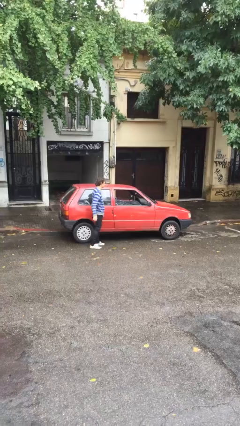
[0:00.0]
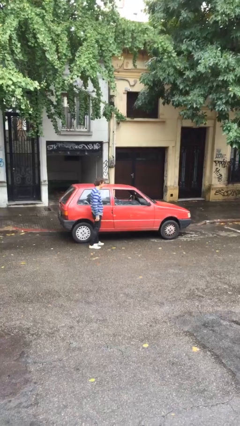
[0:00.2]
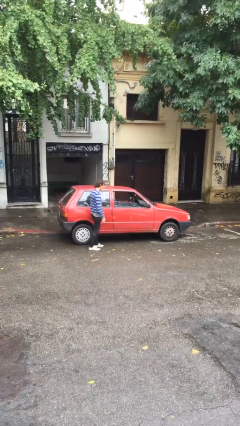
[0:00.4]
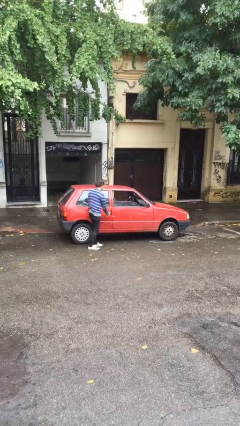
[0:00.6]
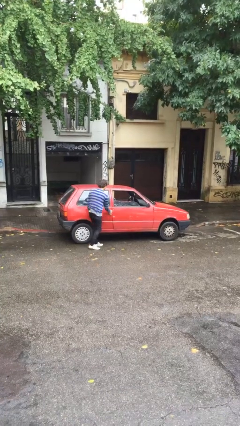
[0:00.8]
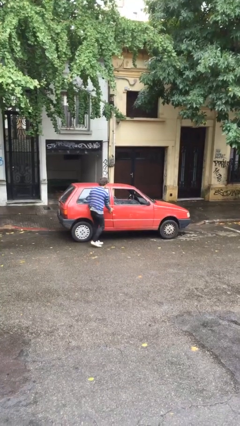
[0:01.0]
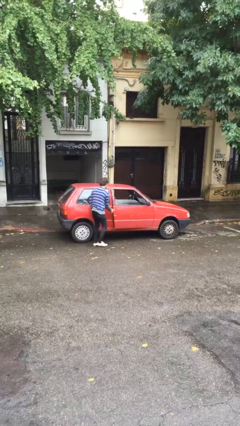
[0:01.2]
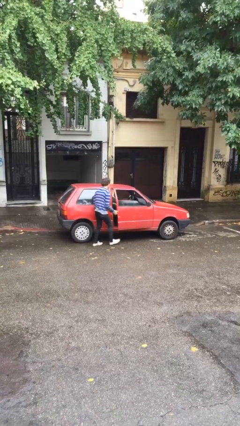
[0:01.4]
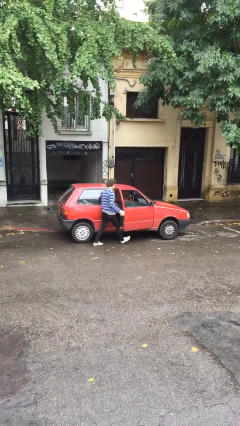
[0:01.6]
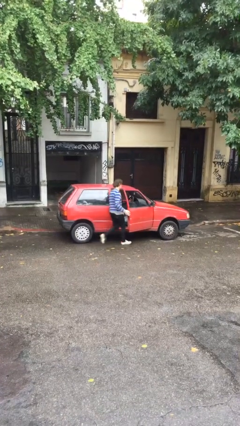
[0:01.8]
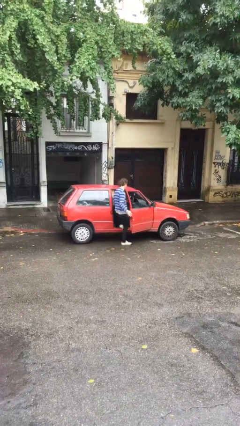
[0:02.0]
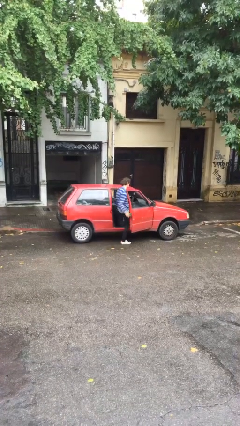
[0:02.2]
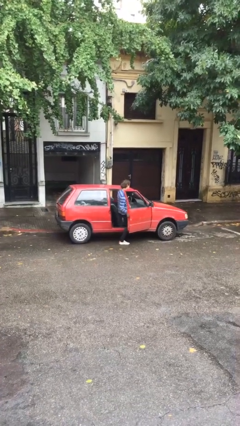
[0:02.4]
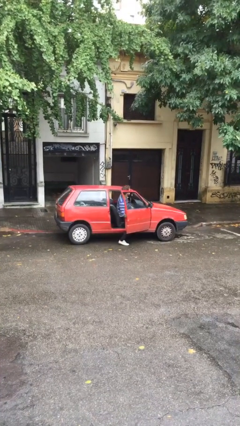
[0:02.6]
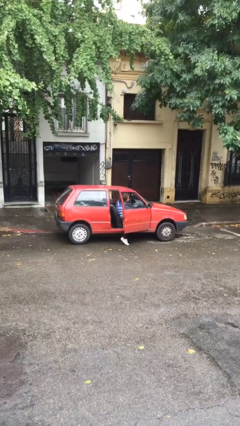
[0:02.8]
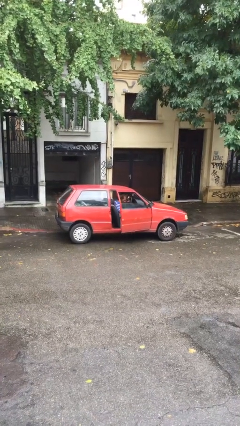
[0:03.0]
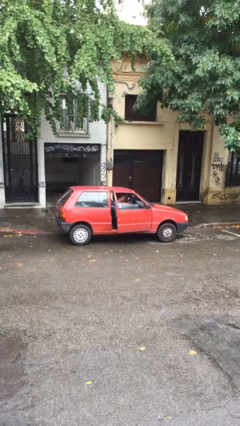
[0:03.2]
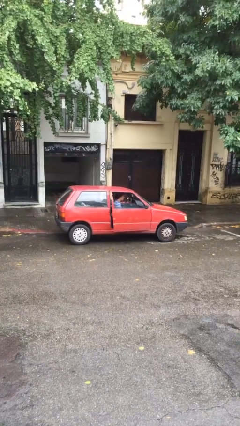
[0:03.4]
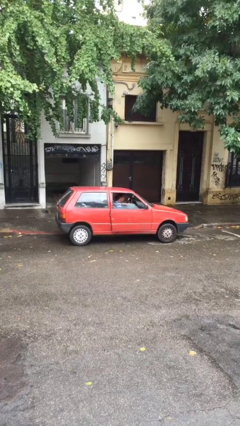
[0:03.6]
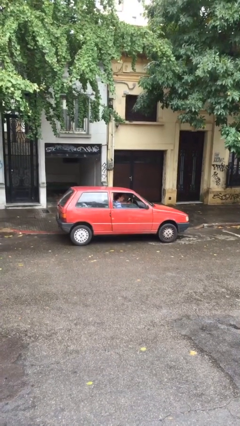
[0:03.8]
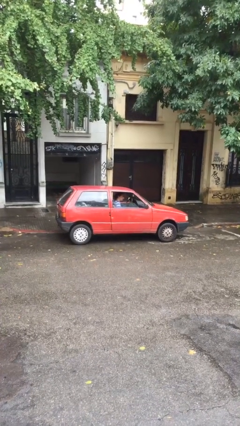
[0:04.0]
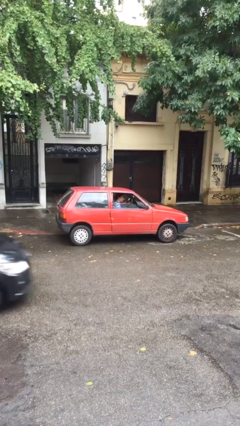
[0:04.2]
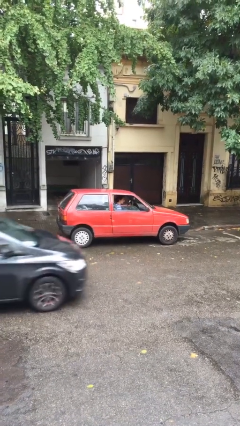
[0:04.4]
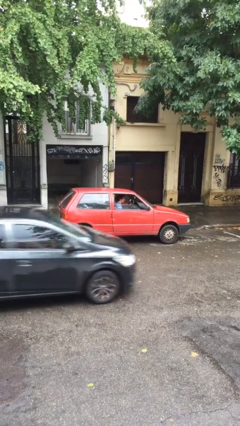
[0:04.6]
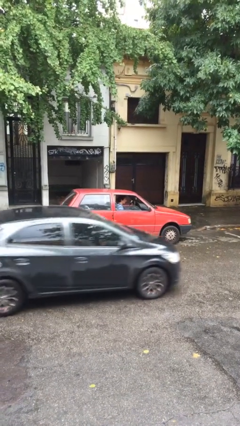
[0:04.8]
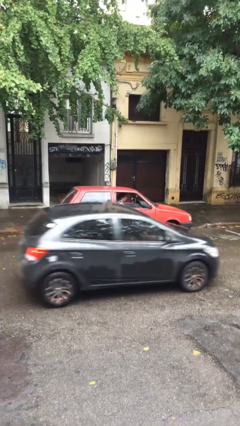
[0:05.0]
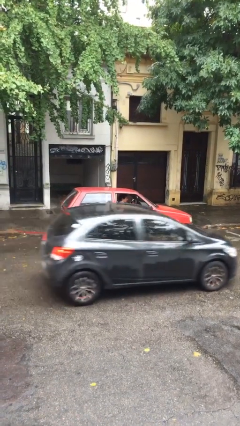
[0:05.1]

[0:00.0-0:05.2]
car picks up person

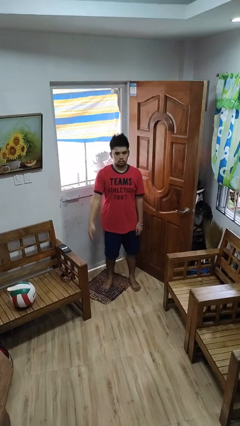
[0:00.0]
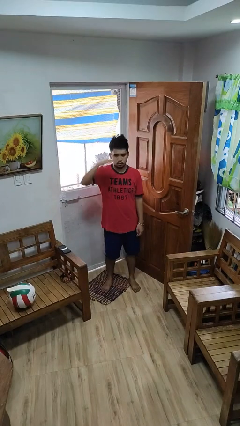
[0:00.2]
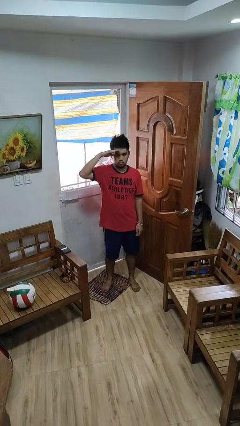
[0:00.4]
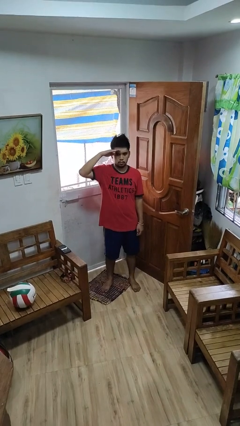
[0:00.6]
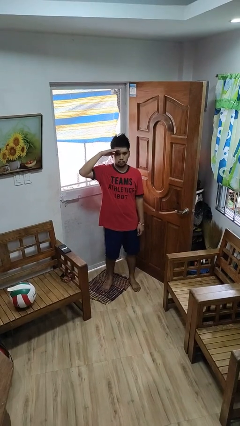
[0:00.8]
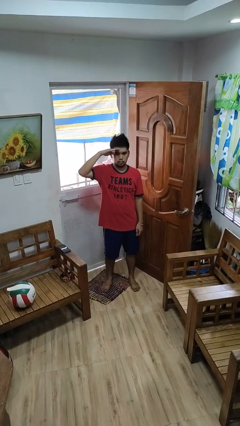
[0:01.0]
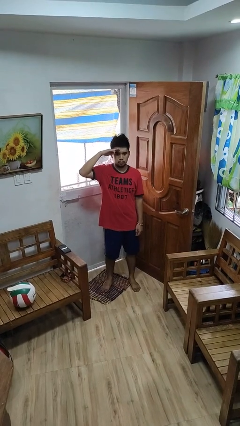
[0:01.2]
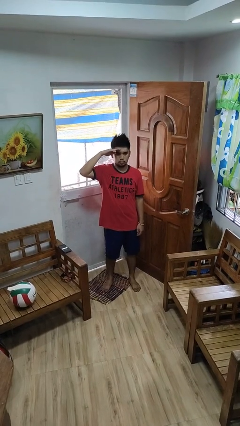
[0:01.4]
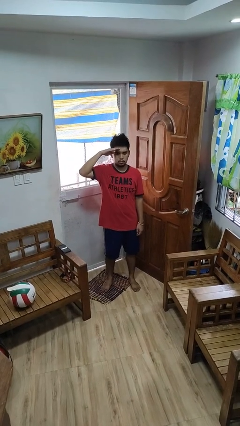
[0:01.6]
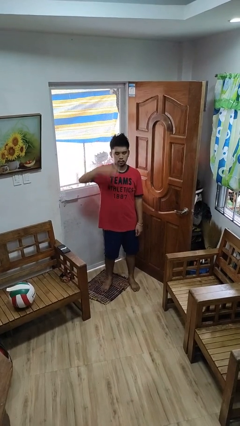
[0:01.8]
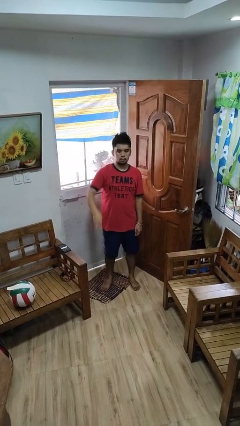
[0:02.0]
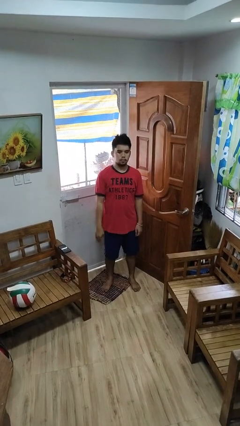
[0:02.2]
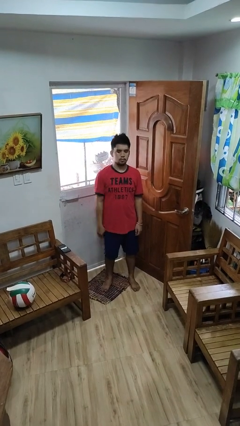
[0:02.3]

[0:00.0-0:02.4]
person salutes

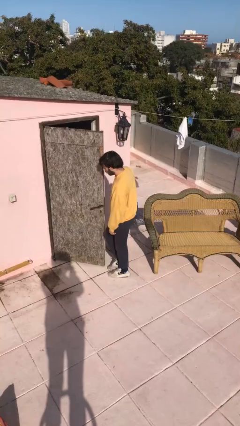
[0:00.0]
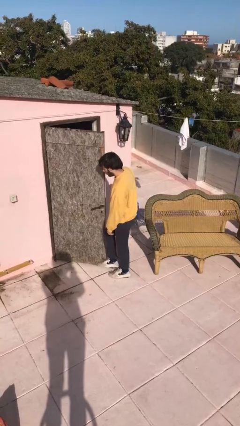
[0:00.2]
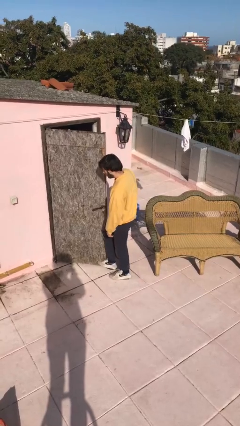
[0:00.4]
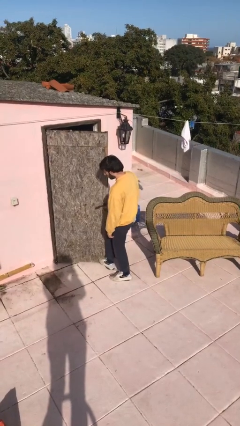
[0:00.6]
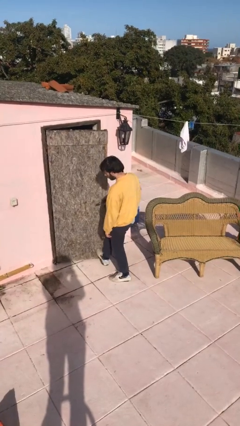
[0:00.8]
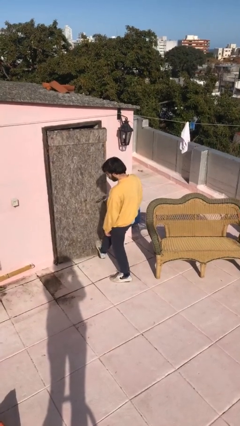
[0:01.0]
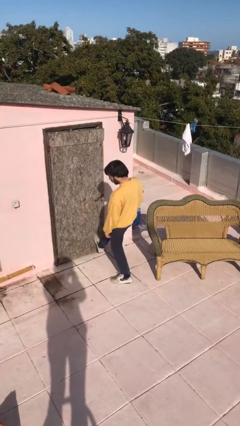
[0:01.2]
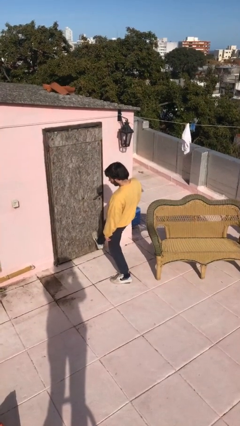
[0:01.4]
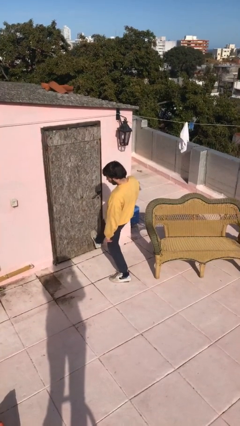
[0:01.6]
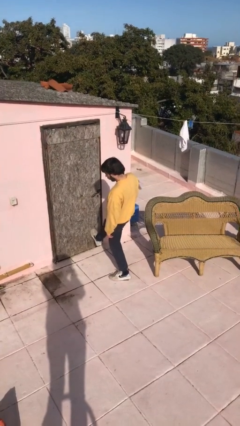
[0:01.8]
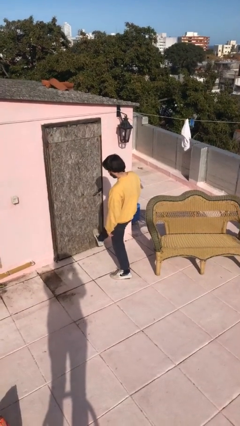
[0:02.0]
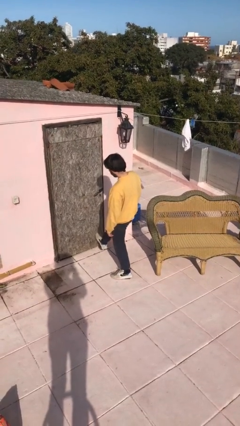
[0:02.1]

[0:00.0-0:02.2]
person closes door with foot

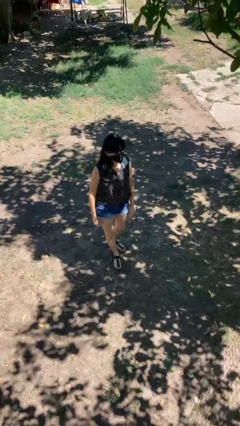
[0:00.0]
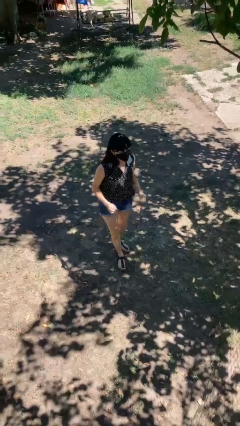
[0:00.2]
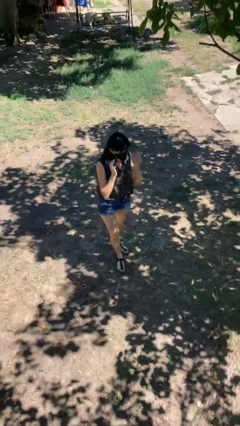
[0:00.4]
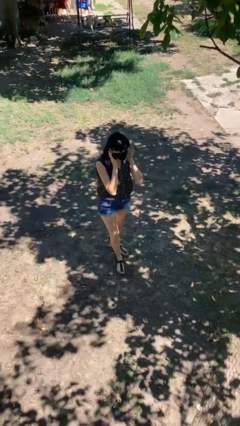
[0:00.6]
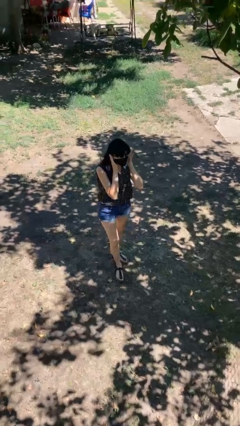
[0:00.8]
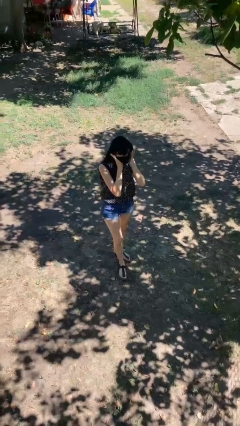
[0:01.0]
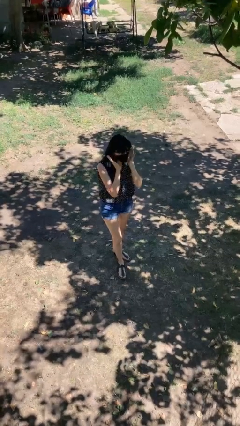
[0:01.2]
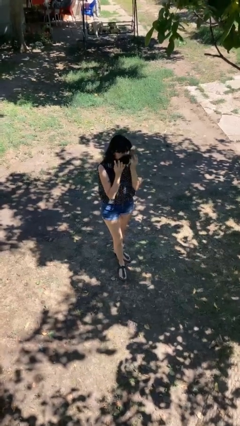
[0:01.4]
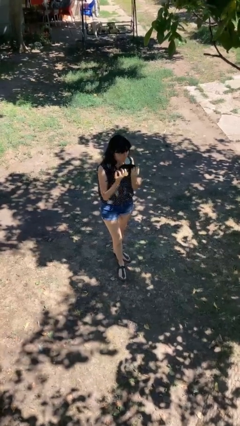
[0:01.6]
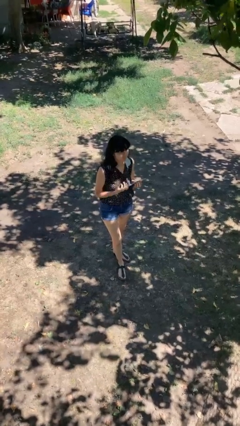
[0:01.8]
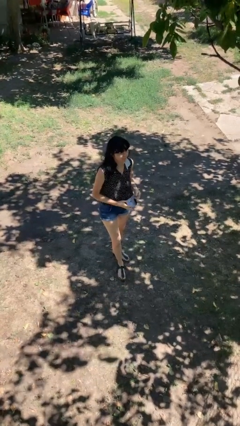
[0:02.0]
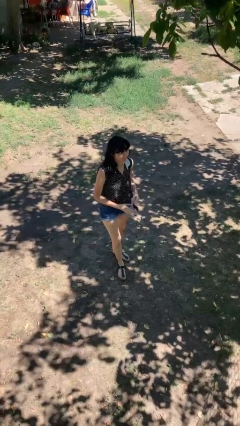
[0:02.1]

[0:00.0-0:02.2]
person takes off facemask

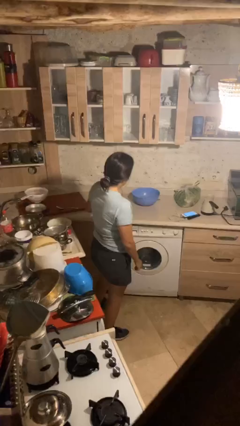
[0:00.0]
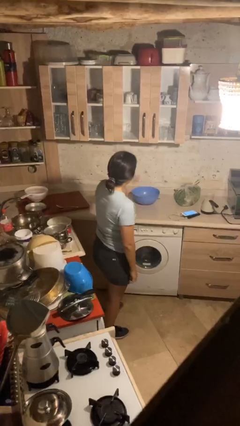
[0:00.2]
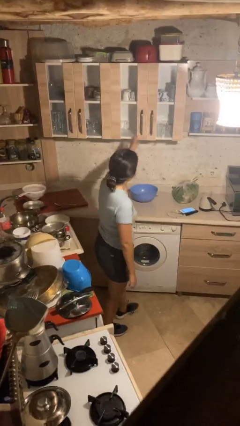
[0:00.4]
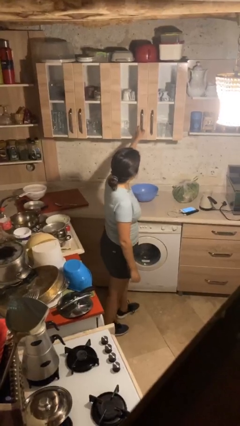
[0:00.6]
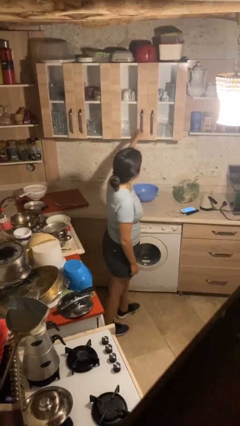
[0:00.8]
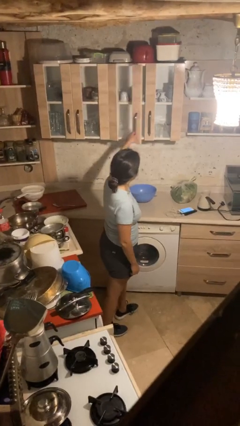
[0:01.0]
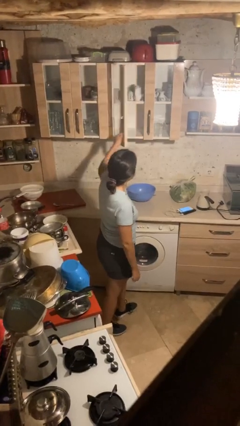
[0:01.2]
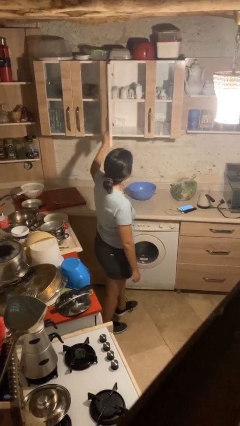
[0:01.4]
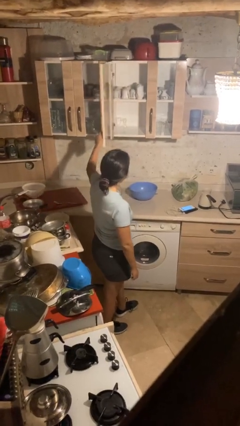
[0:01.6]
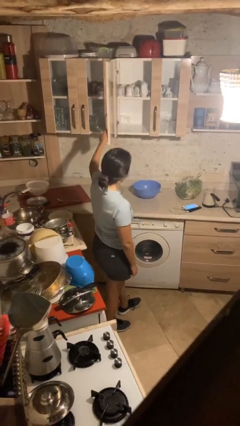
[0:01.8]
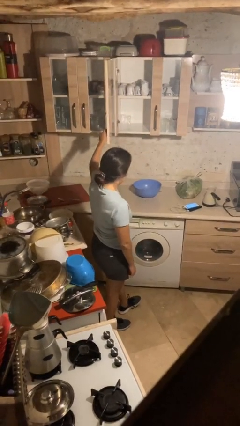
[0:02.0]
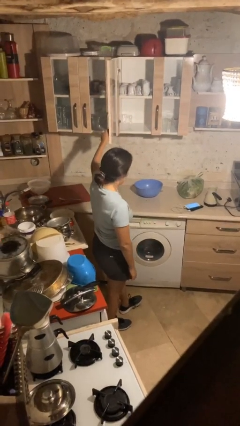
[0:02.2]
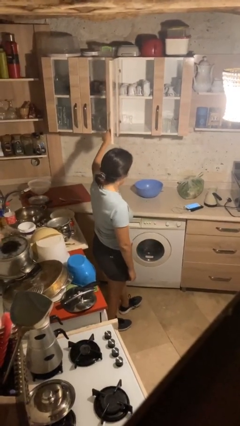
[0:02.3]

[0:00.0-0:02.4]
person closes cabinet

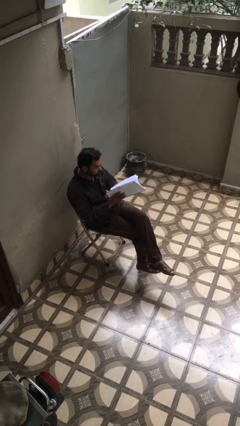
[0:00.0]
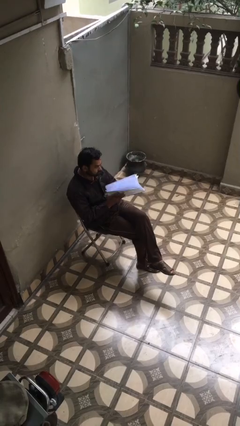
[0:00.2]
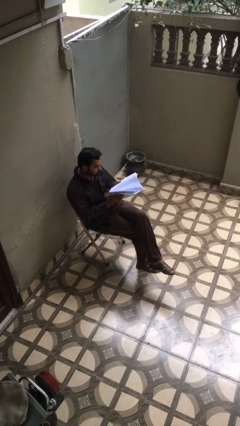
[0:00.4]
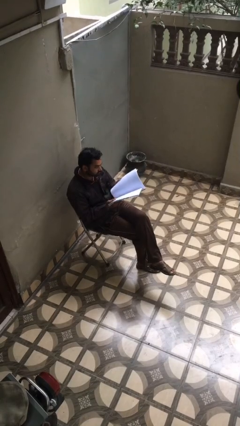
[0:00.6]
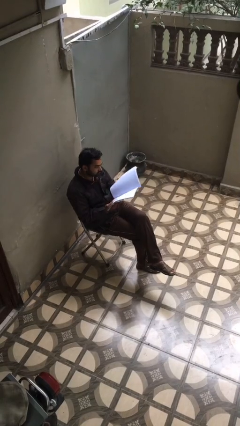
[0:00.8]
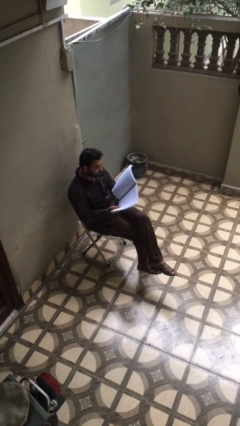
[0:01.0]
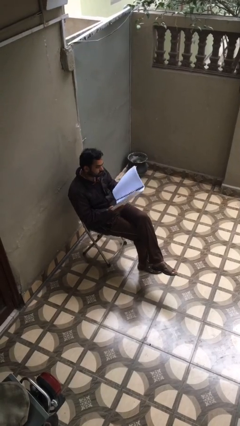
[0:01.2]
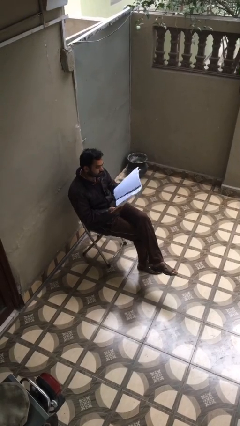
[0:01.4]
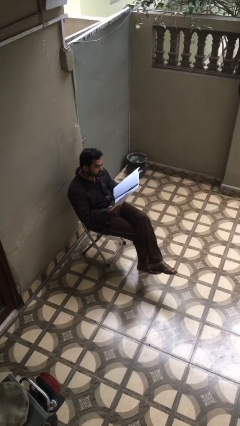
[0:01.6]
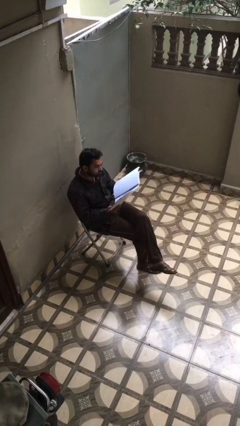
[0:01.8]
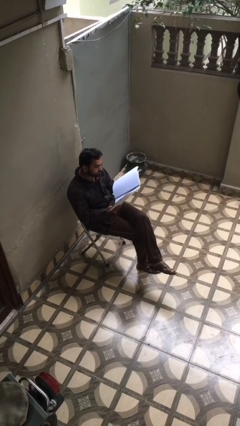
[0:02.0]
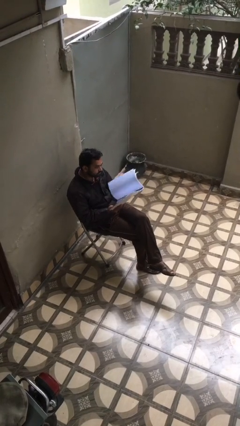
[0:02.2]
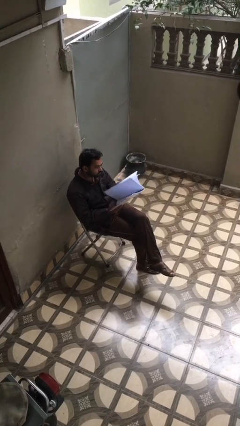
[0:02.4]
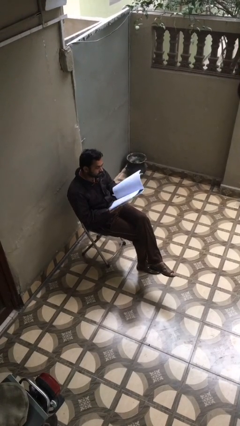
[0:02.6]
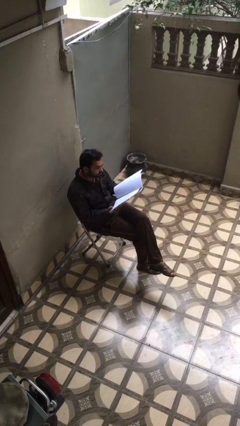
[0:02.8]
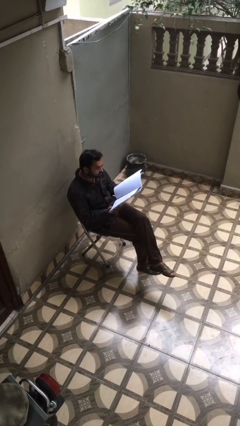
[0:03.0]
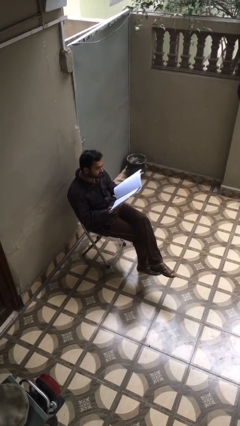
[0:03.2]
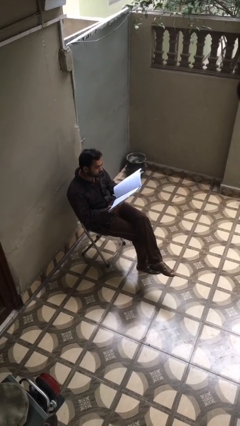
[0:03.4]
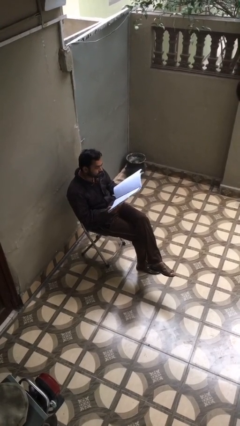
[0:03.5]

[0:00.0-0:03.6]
person reads document
